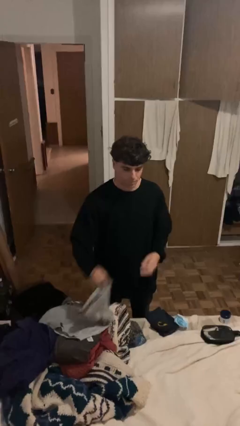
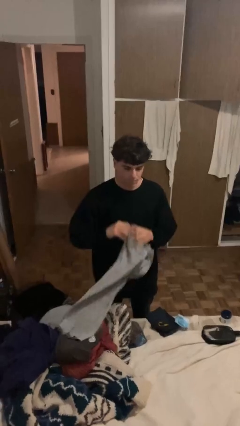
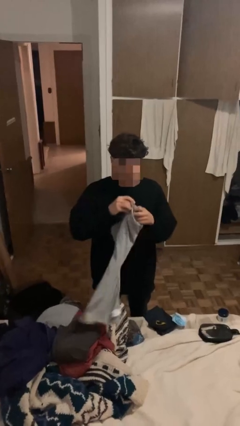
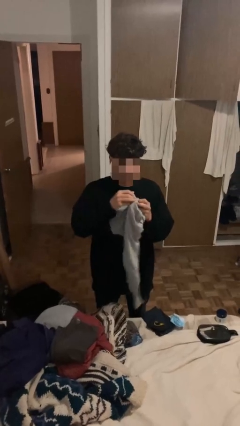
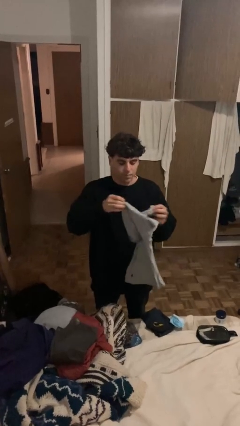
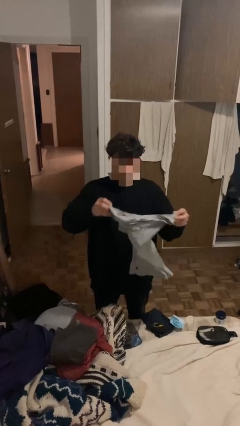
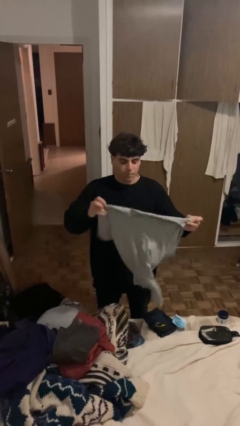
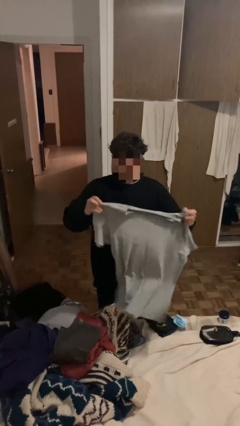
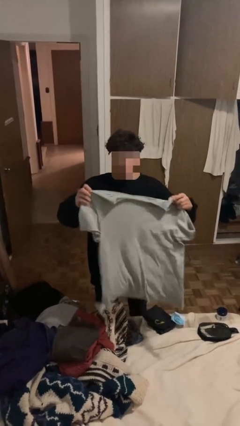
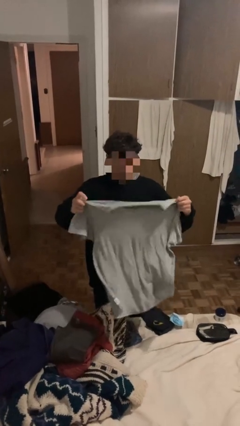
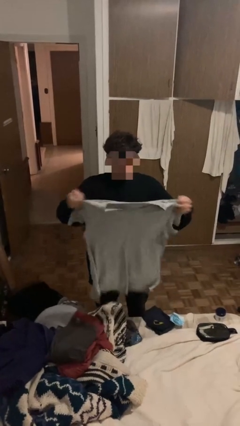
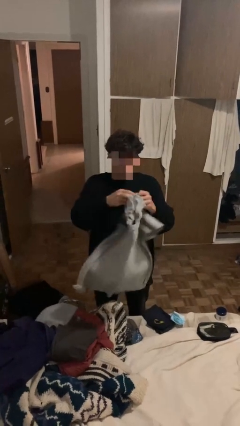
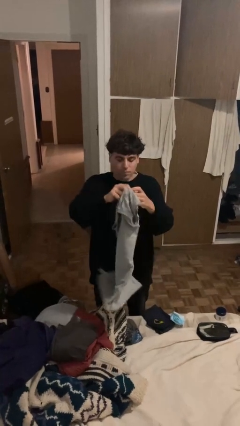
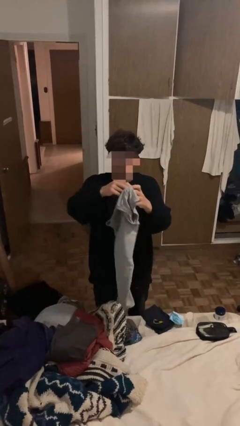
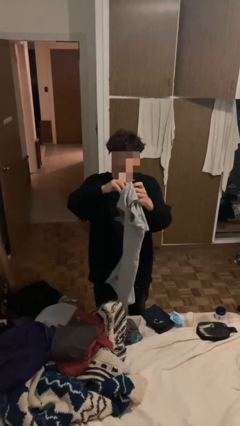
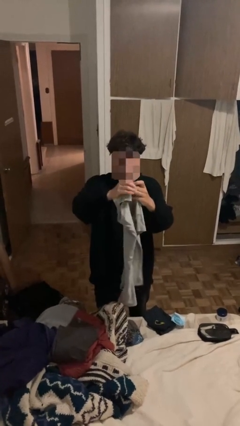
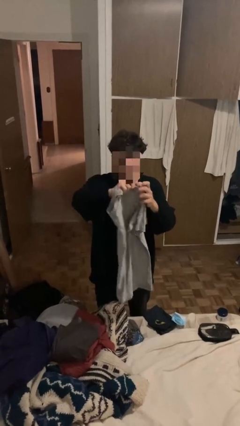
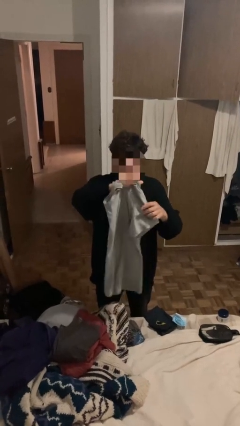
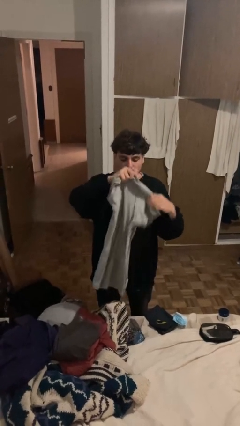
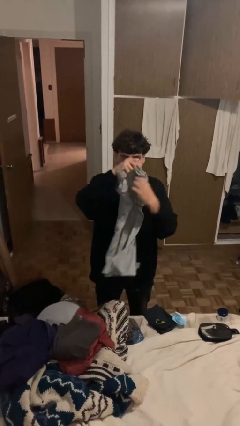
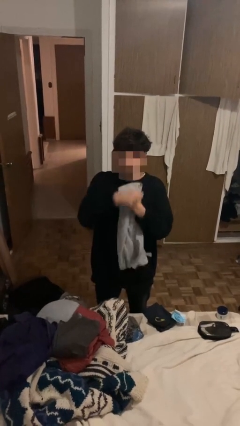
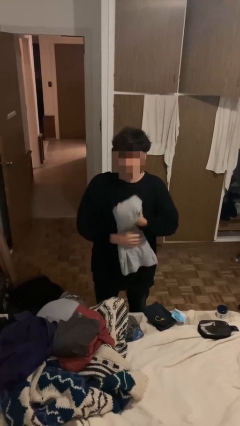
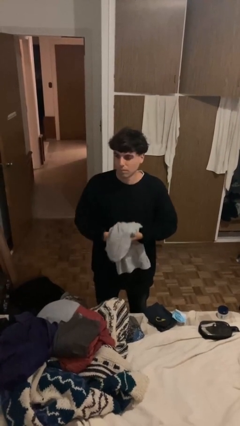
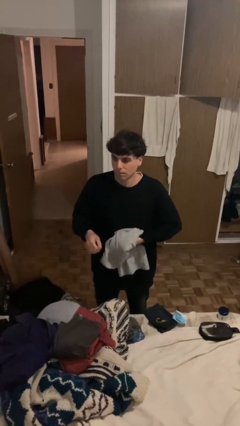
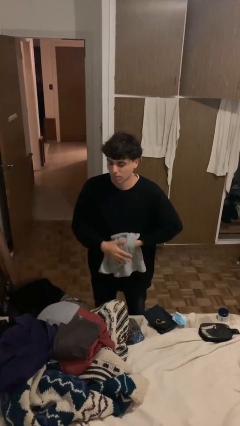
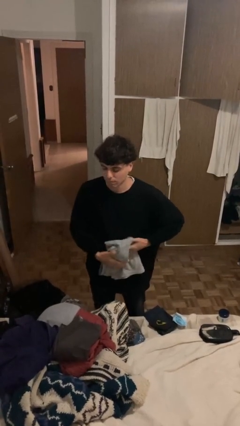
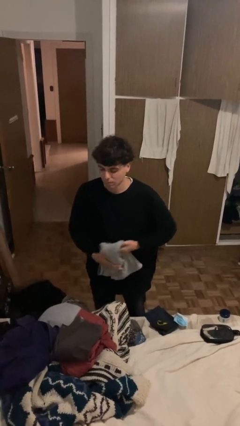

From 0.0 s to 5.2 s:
person folds shirt

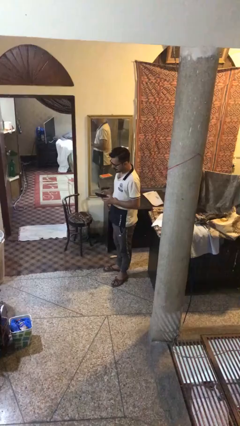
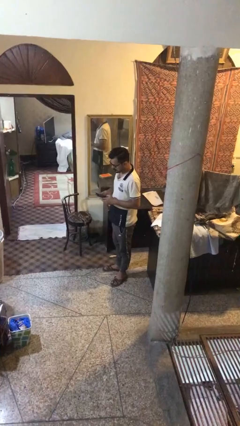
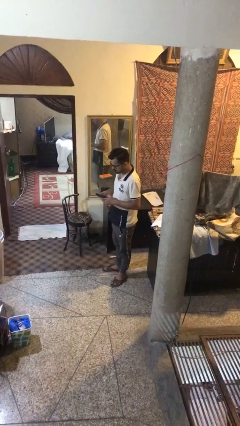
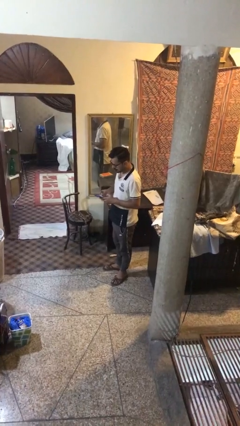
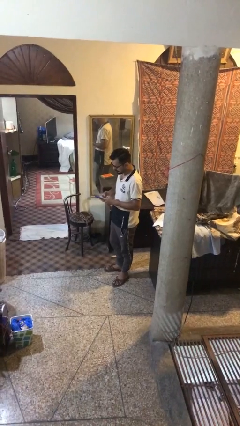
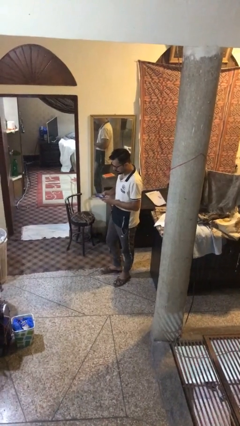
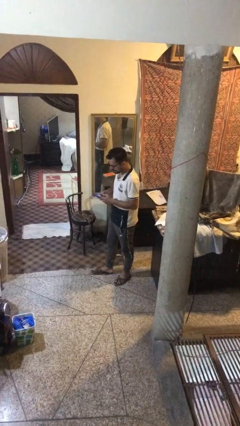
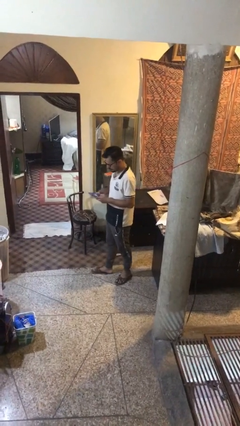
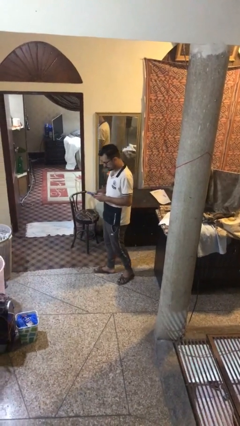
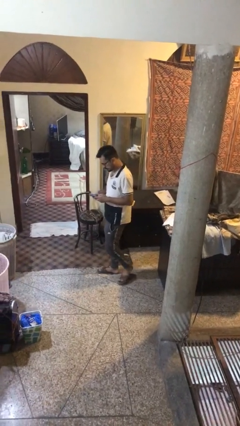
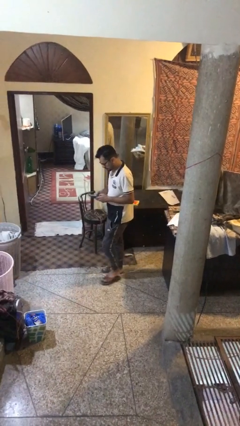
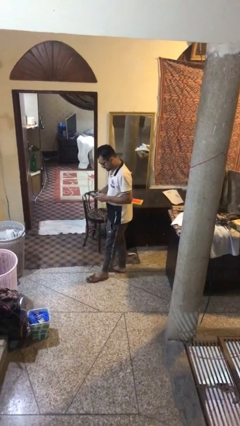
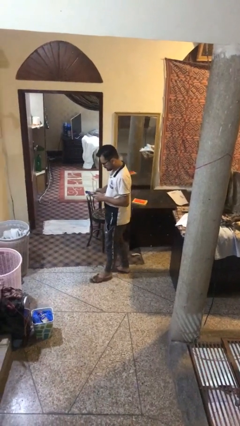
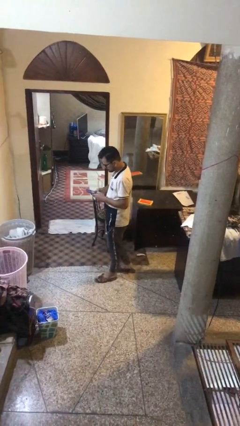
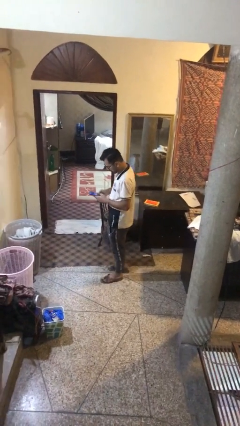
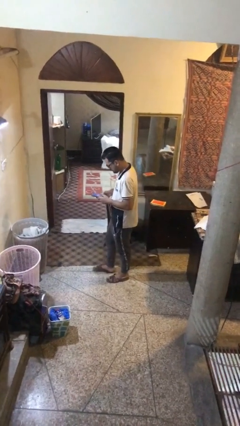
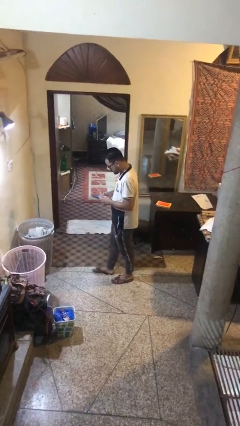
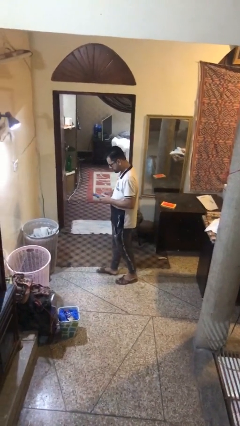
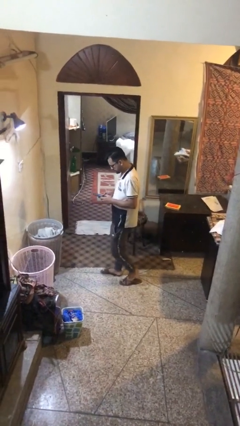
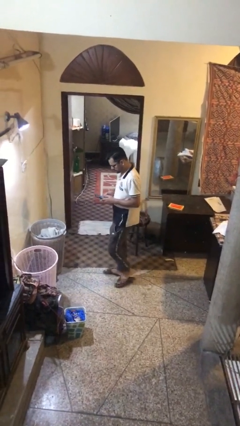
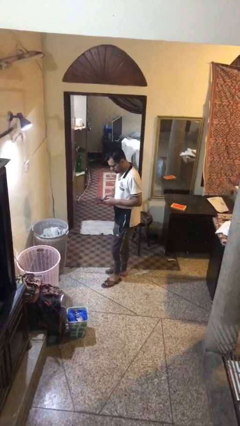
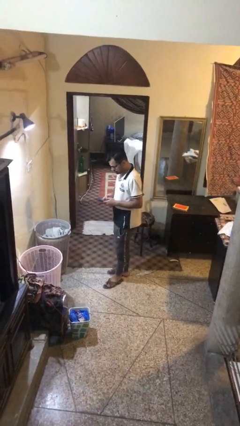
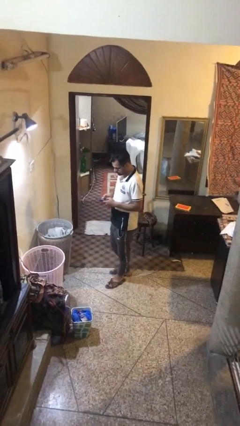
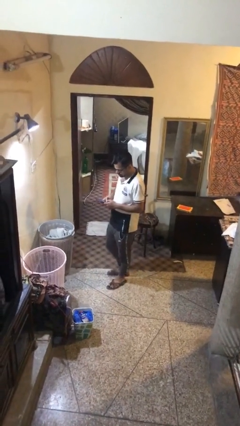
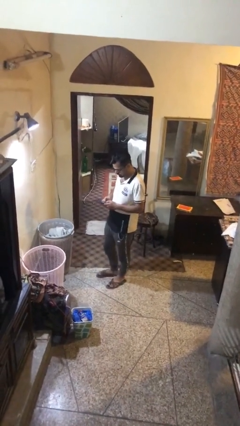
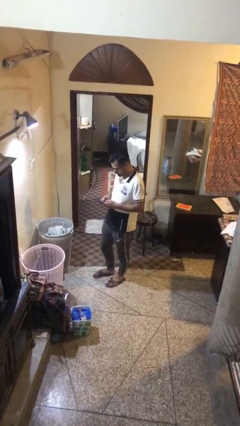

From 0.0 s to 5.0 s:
person texts on phone

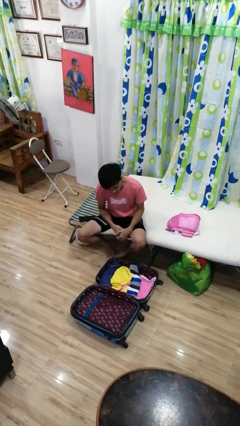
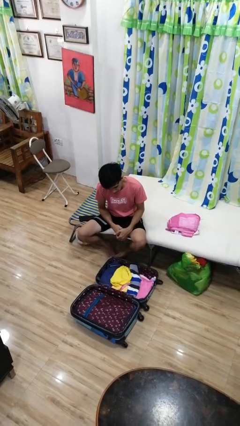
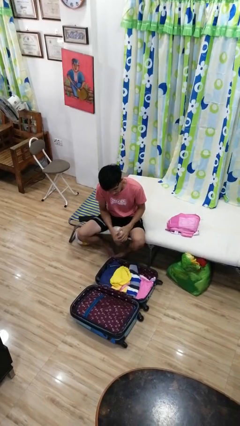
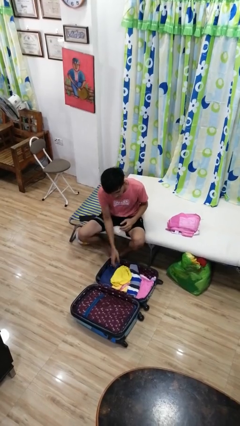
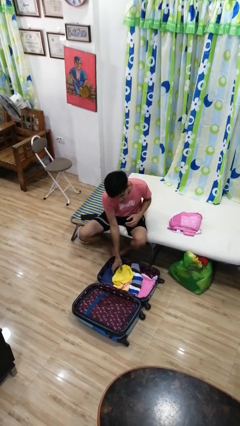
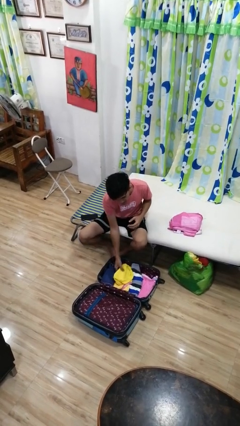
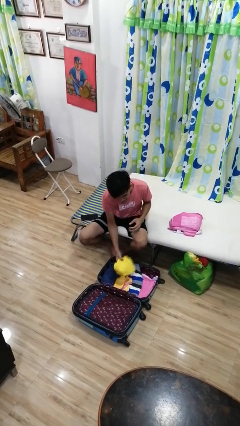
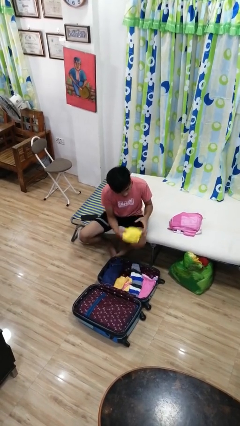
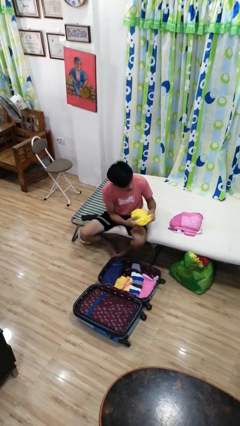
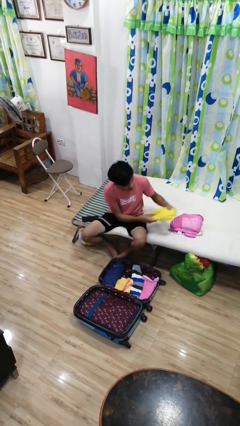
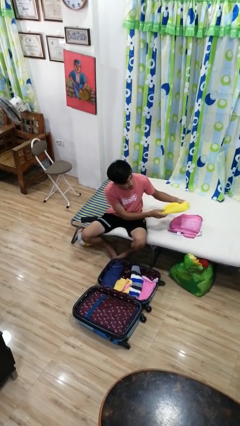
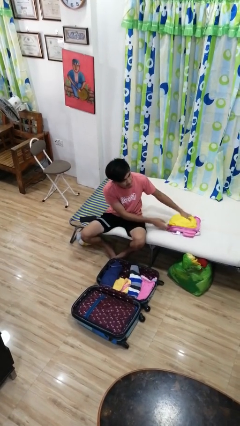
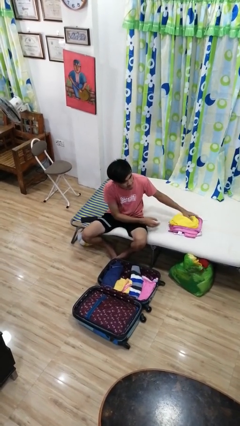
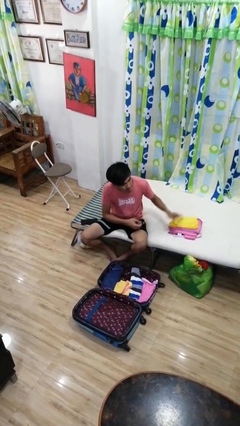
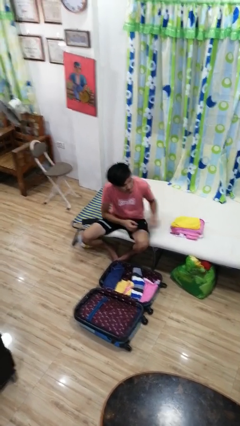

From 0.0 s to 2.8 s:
person unloads clothes from suitcase

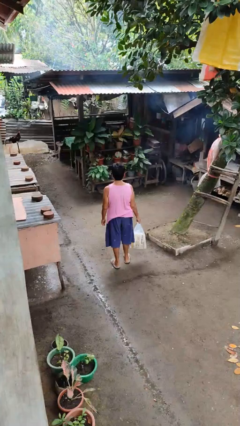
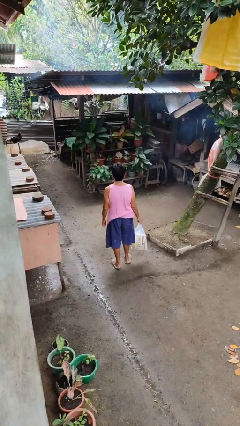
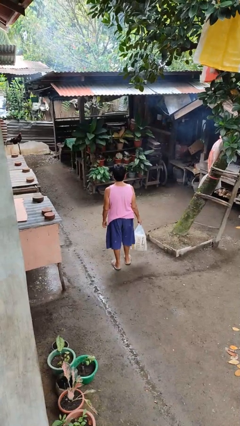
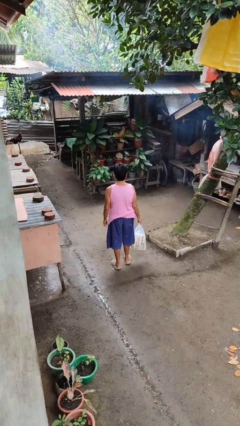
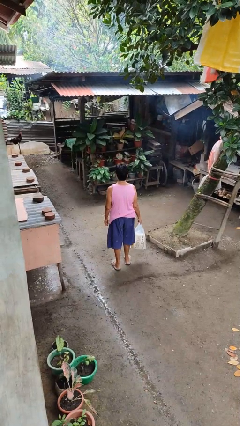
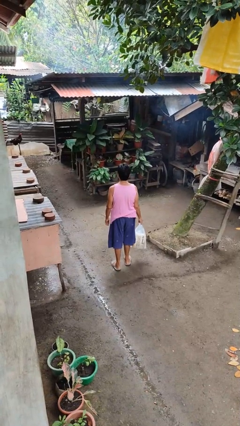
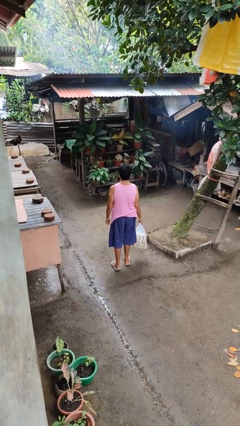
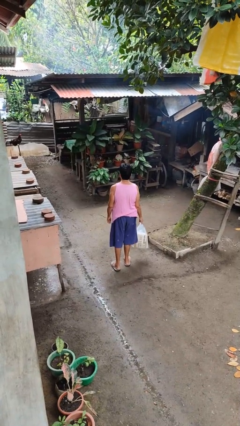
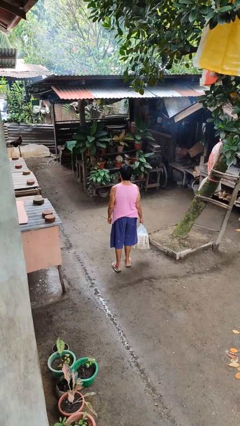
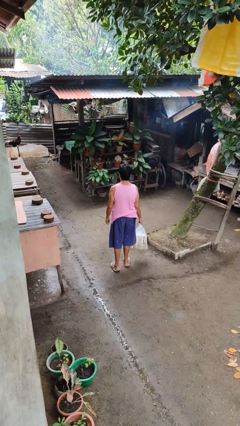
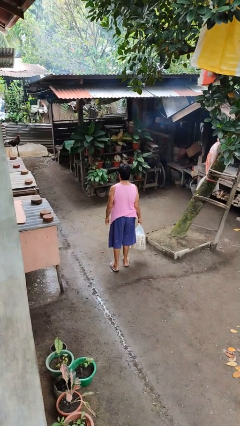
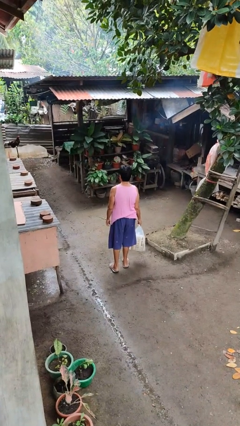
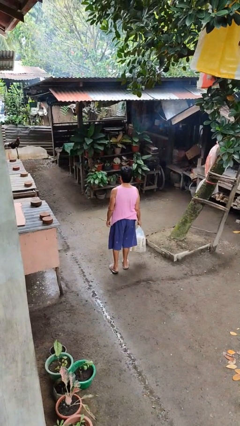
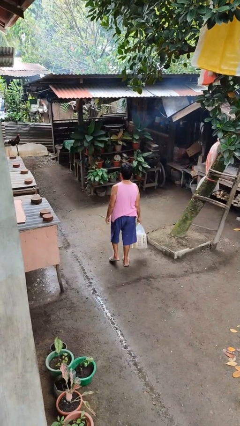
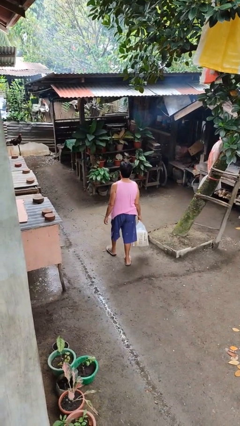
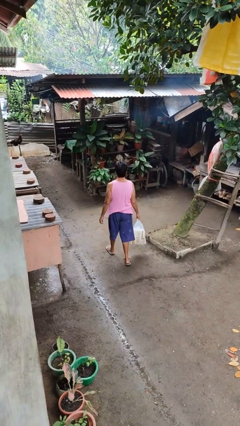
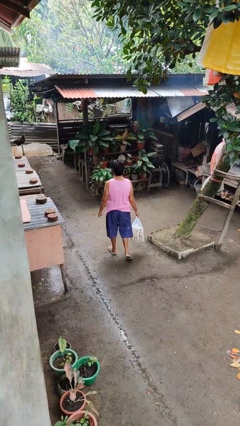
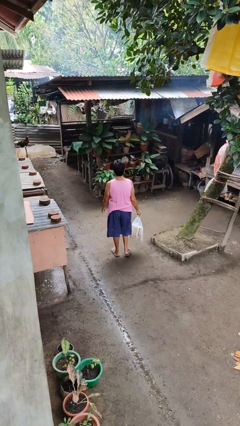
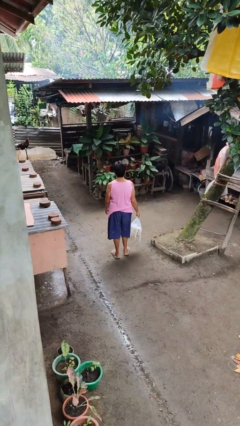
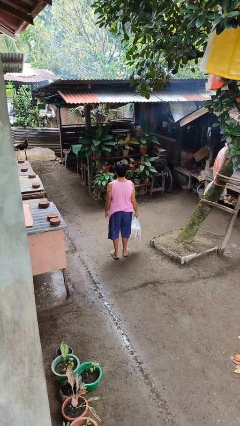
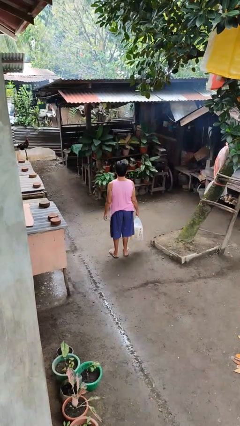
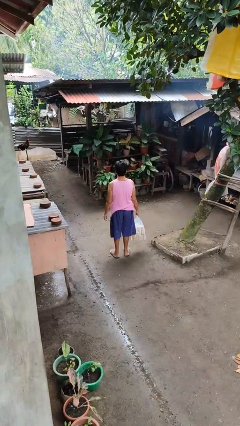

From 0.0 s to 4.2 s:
person carries groceries

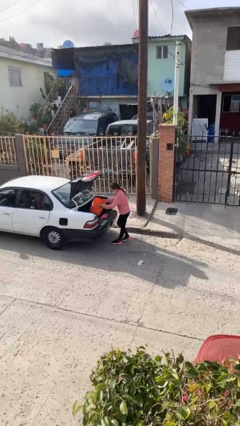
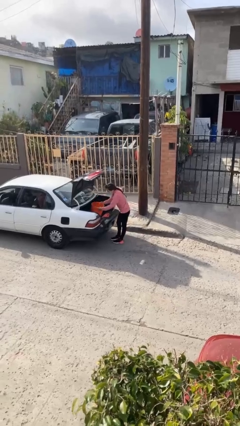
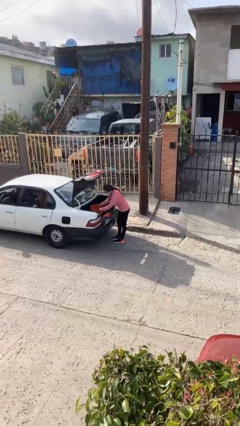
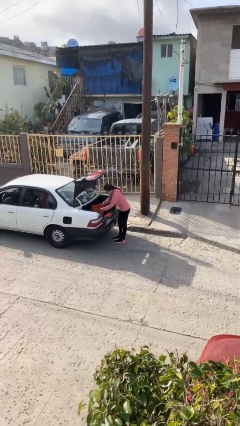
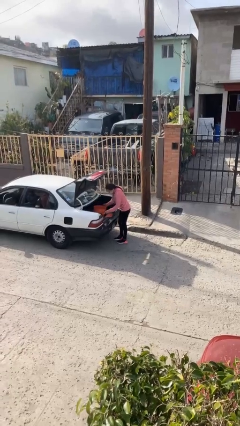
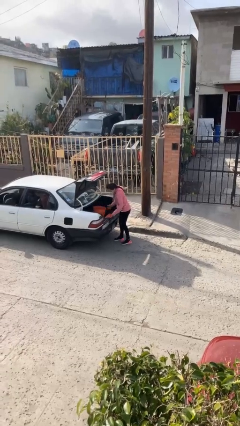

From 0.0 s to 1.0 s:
person loads car
